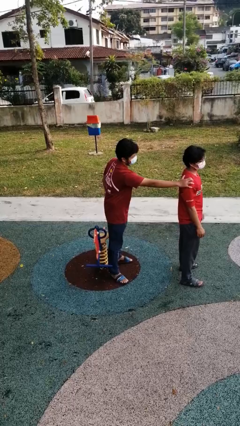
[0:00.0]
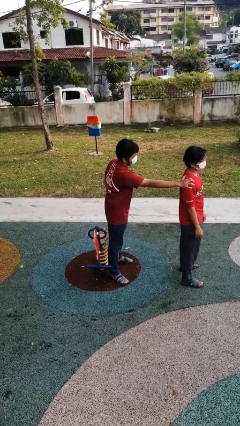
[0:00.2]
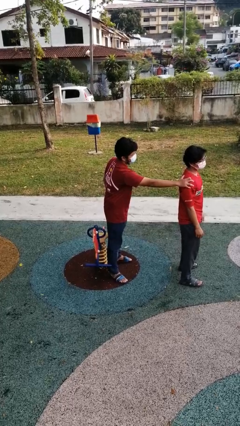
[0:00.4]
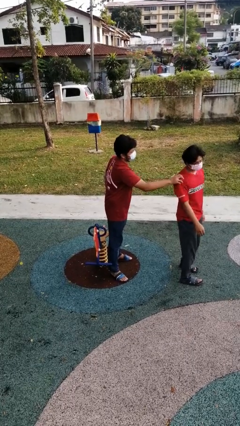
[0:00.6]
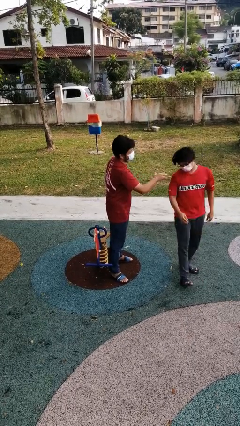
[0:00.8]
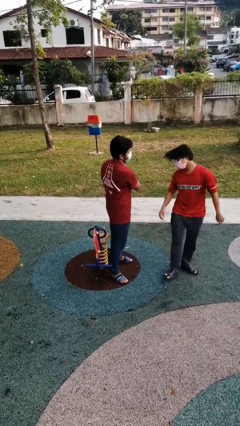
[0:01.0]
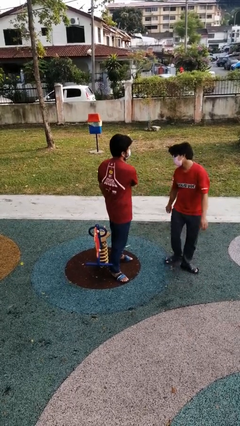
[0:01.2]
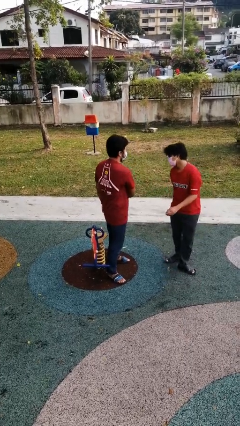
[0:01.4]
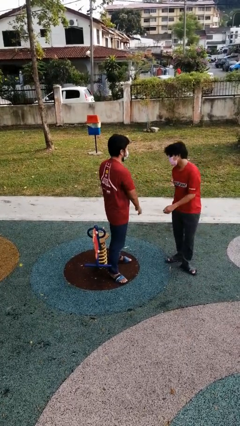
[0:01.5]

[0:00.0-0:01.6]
person spins person around

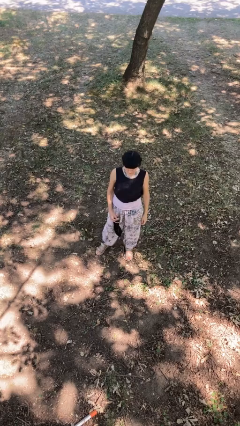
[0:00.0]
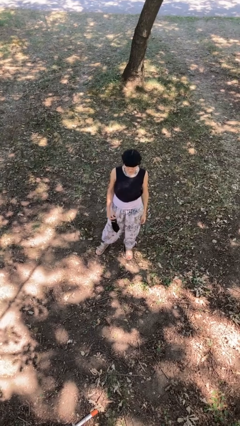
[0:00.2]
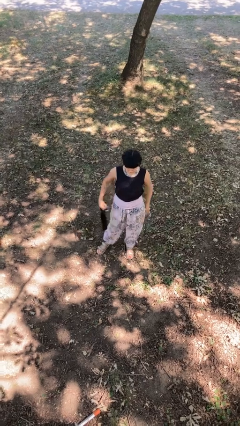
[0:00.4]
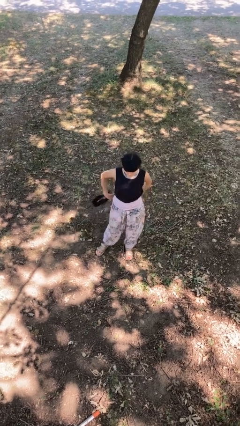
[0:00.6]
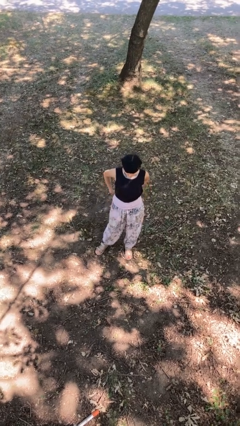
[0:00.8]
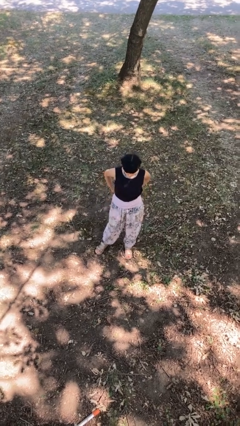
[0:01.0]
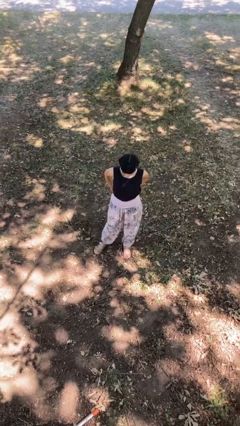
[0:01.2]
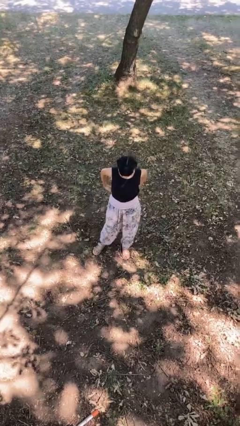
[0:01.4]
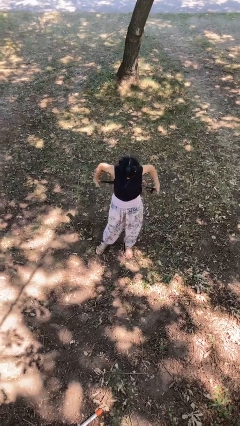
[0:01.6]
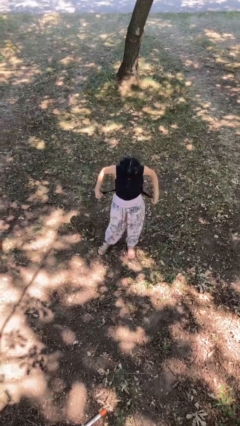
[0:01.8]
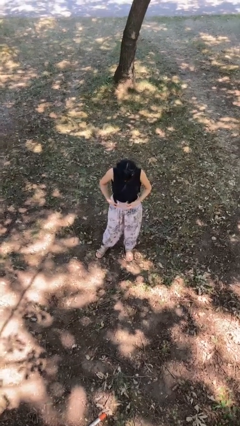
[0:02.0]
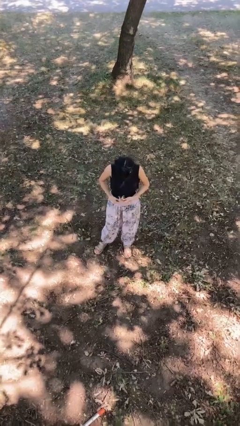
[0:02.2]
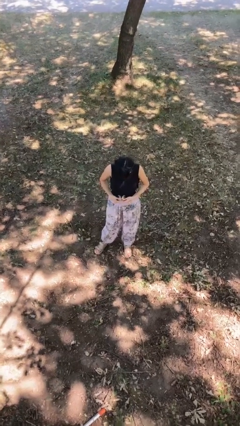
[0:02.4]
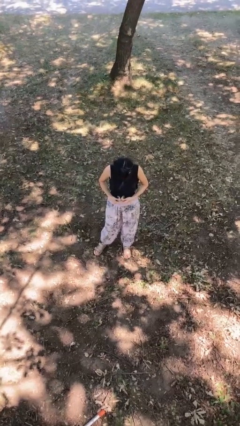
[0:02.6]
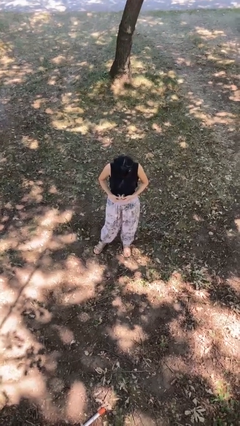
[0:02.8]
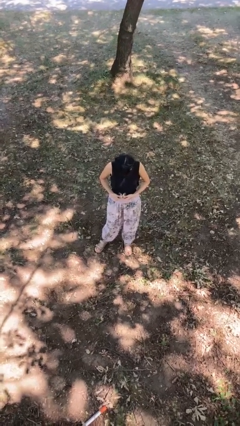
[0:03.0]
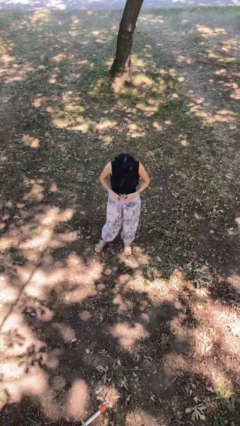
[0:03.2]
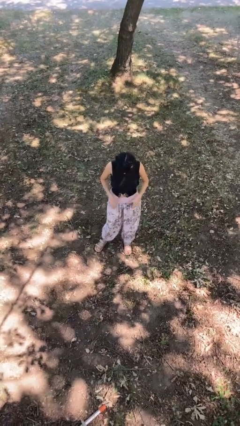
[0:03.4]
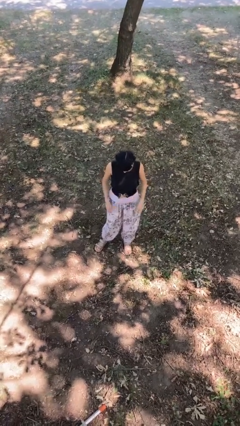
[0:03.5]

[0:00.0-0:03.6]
person puts on belt

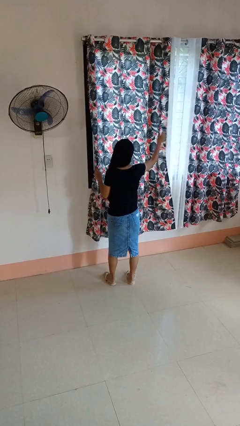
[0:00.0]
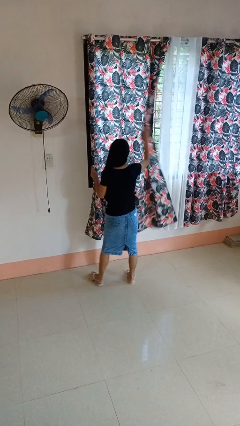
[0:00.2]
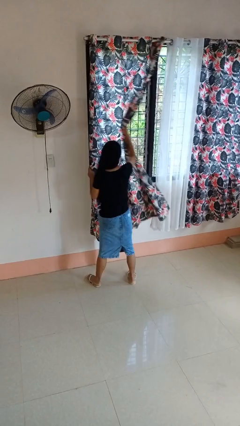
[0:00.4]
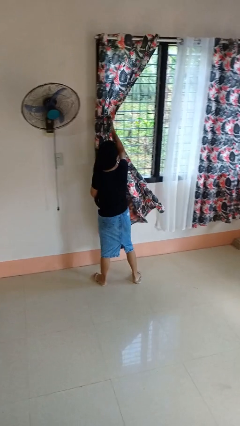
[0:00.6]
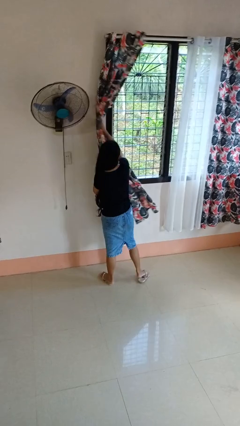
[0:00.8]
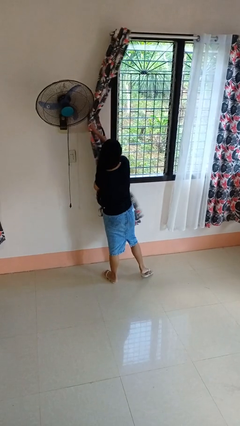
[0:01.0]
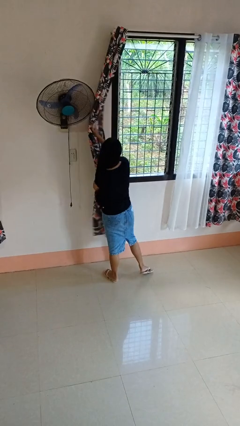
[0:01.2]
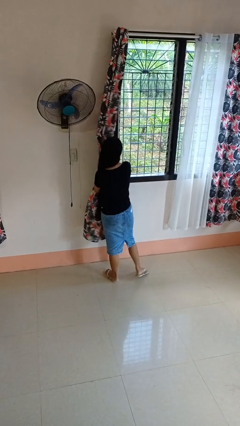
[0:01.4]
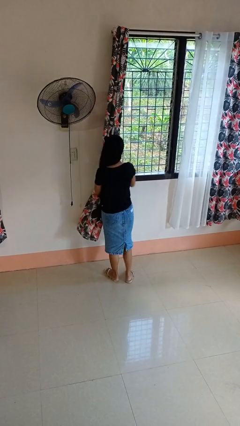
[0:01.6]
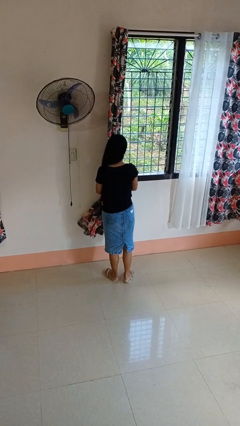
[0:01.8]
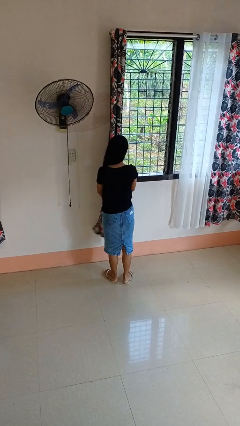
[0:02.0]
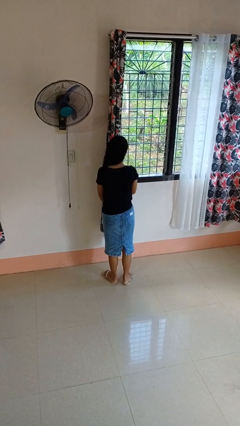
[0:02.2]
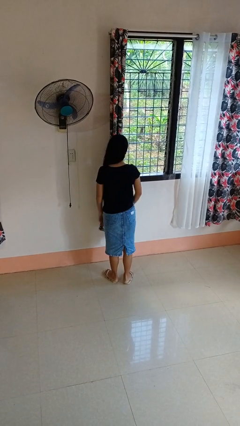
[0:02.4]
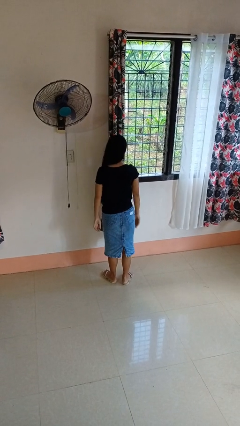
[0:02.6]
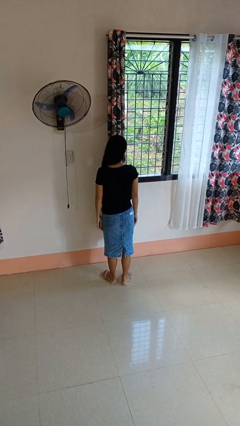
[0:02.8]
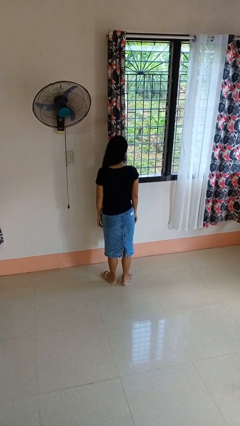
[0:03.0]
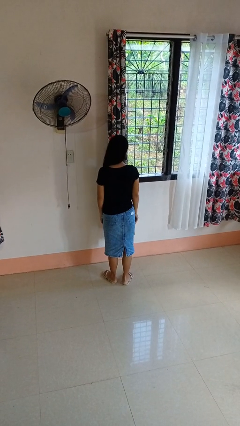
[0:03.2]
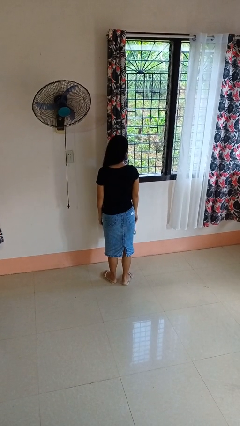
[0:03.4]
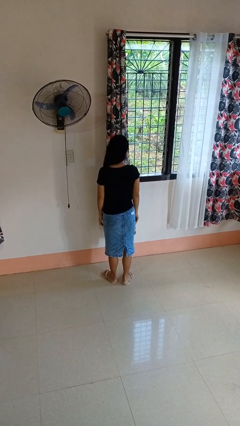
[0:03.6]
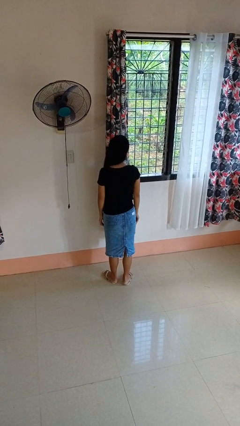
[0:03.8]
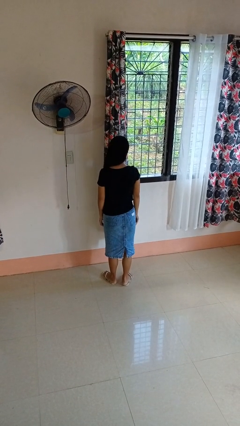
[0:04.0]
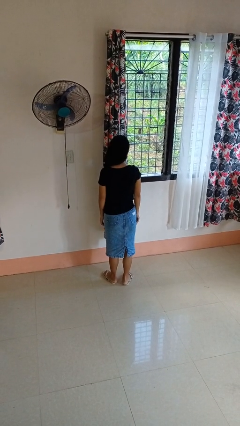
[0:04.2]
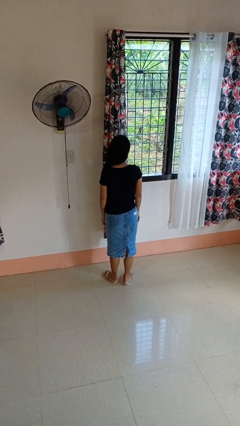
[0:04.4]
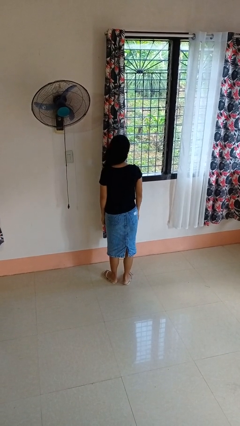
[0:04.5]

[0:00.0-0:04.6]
person opens curtains

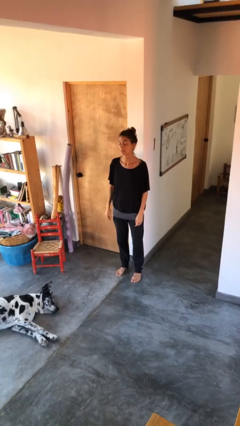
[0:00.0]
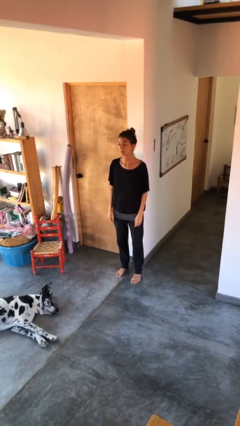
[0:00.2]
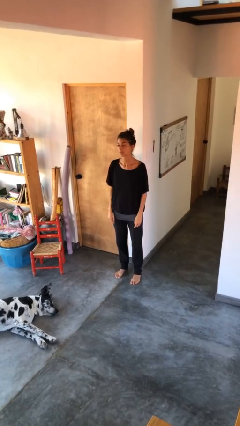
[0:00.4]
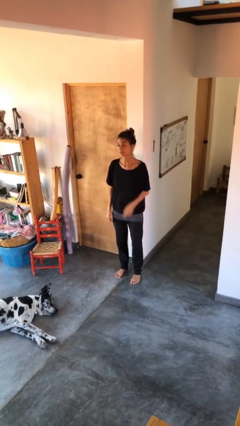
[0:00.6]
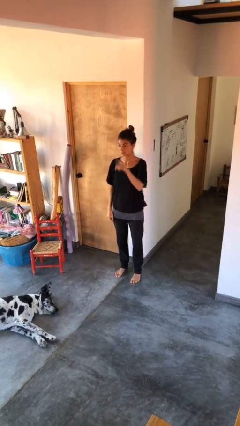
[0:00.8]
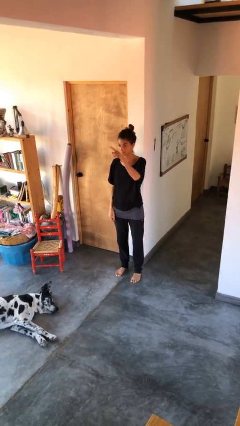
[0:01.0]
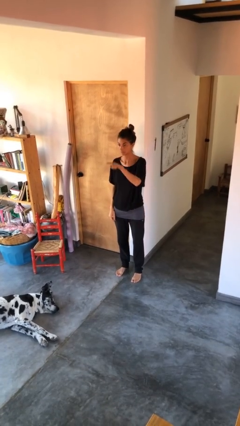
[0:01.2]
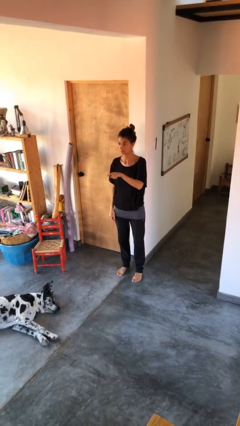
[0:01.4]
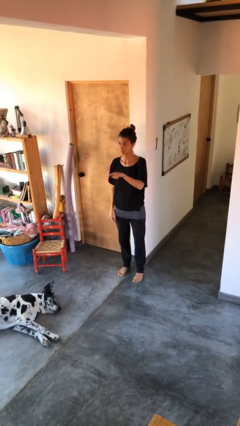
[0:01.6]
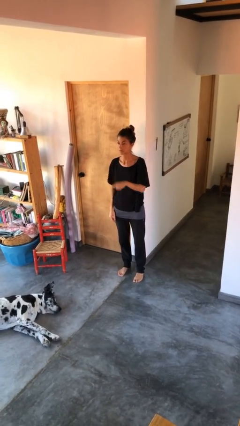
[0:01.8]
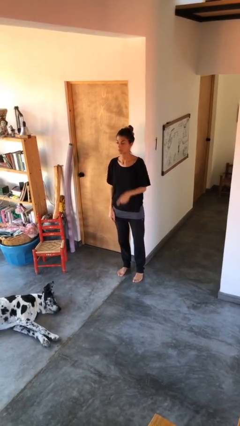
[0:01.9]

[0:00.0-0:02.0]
person gestures swipe down

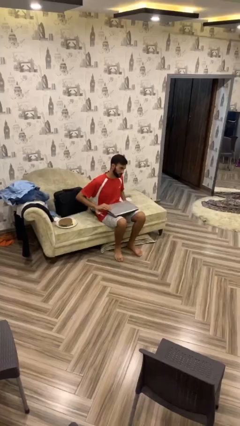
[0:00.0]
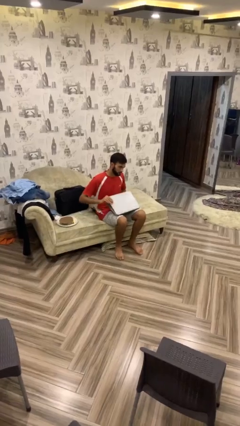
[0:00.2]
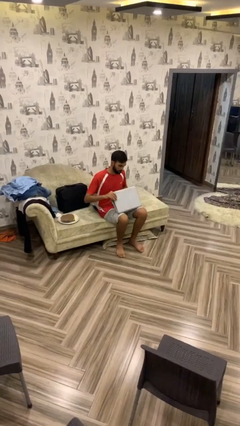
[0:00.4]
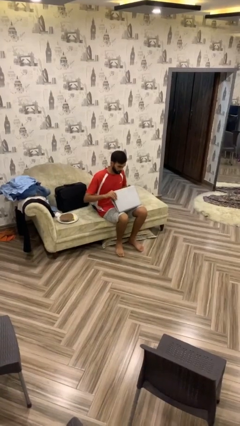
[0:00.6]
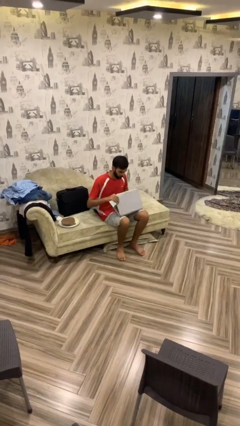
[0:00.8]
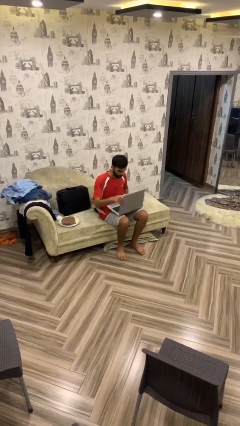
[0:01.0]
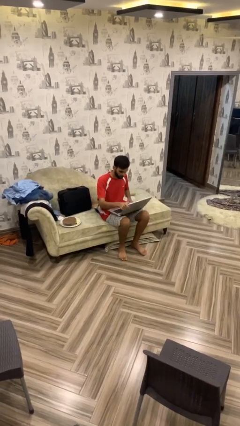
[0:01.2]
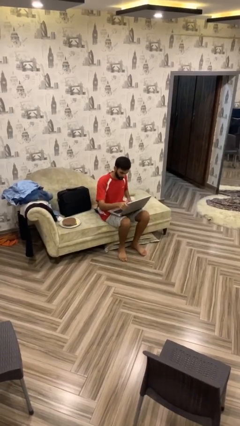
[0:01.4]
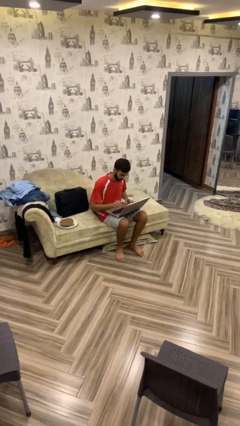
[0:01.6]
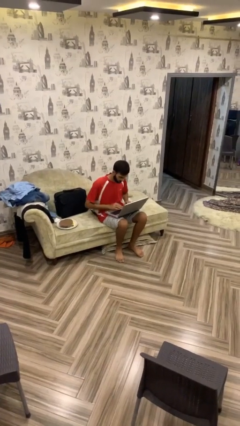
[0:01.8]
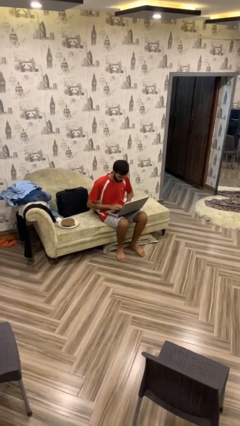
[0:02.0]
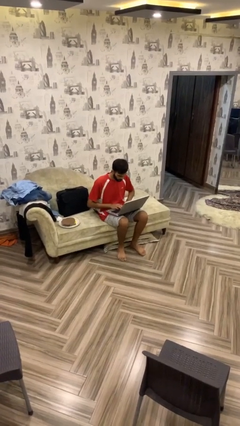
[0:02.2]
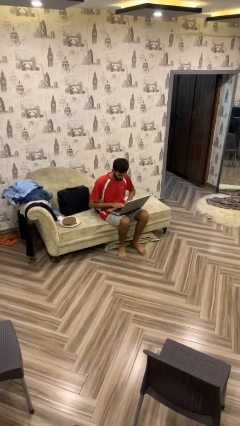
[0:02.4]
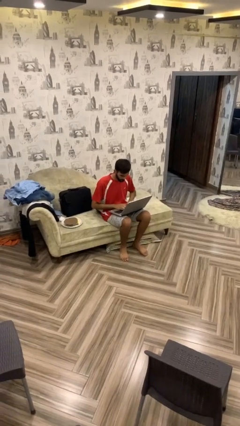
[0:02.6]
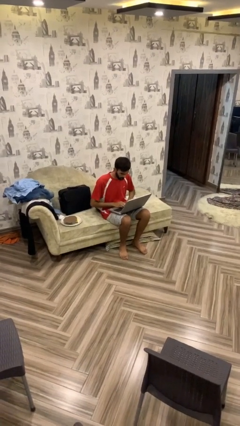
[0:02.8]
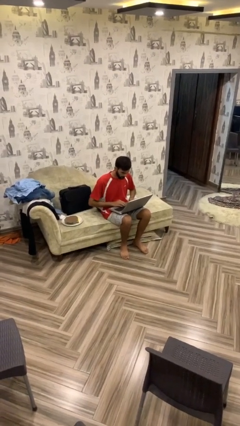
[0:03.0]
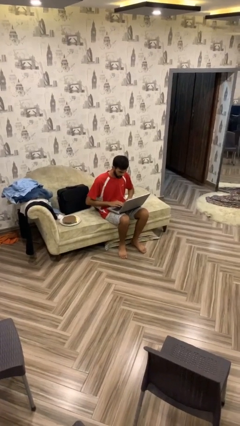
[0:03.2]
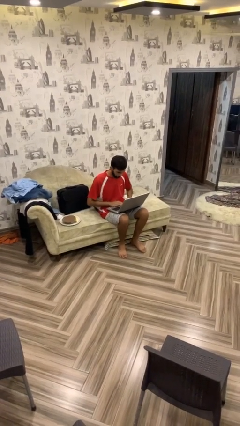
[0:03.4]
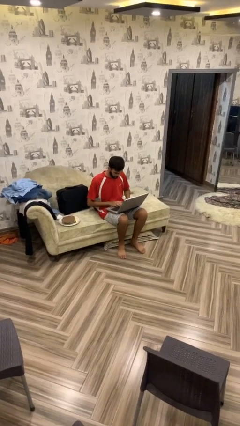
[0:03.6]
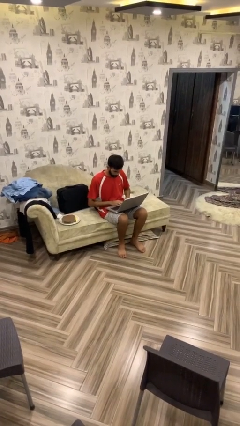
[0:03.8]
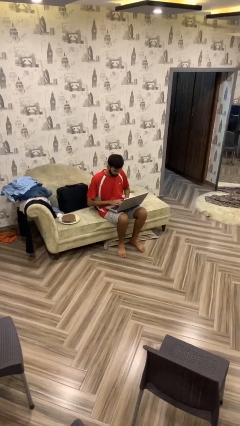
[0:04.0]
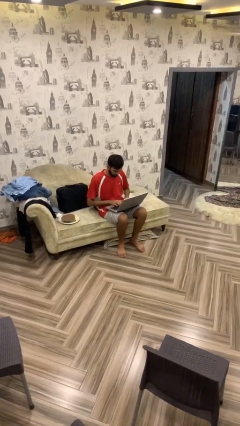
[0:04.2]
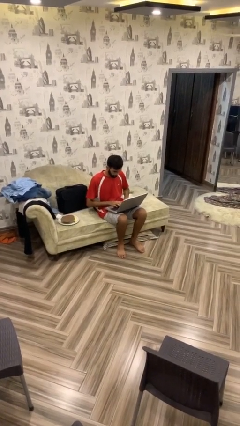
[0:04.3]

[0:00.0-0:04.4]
person interacts with laptop

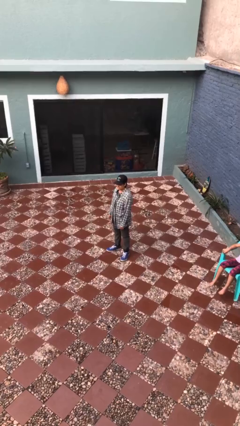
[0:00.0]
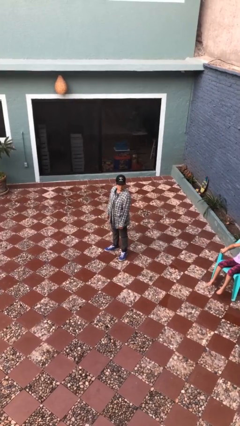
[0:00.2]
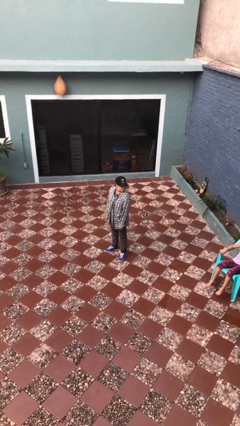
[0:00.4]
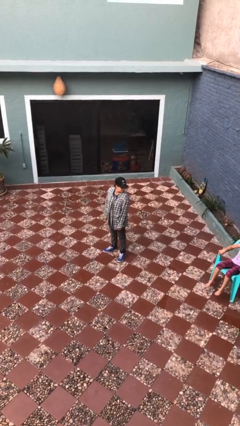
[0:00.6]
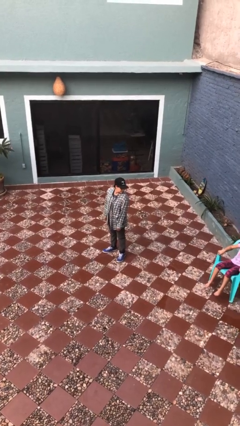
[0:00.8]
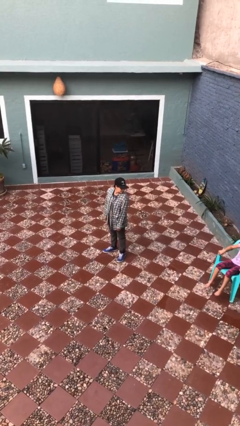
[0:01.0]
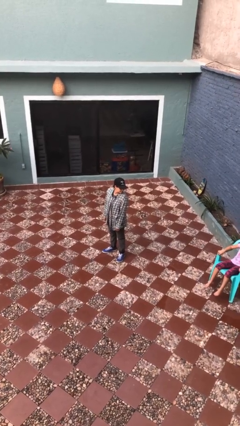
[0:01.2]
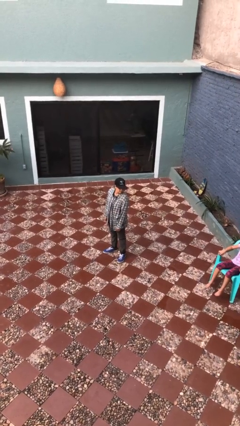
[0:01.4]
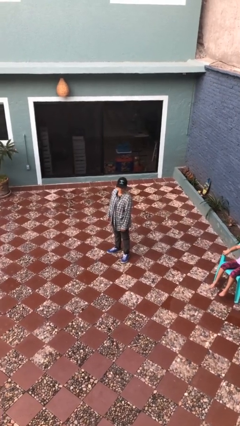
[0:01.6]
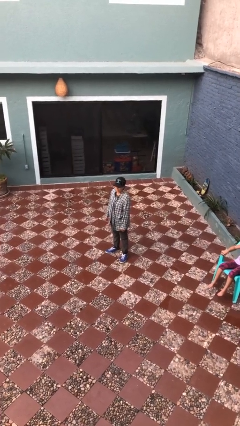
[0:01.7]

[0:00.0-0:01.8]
person looks over shoulder
